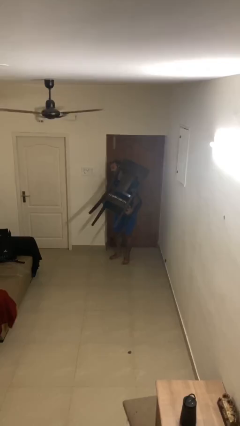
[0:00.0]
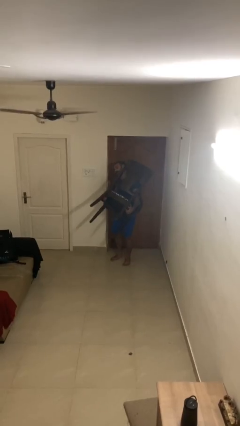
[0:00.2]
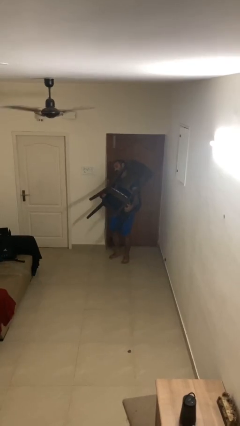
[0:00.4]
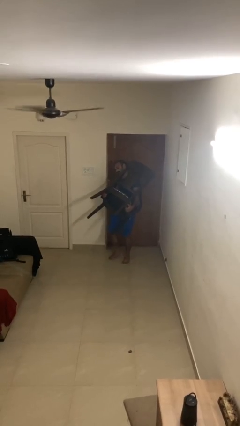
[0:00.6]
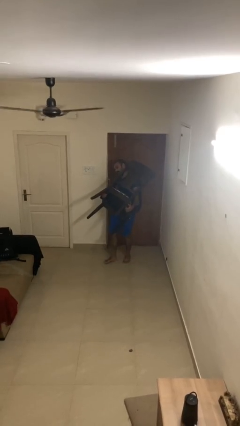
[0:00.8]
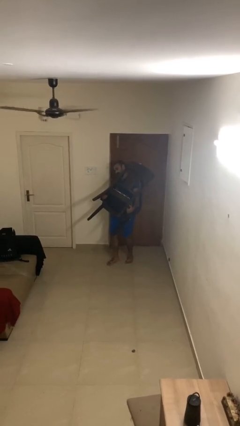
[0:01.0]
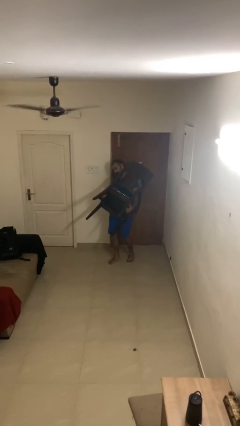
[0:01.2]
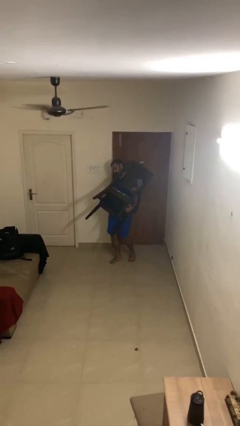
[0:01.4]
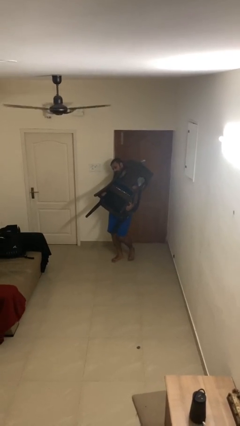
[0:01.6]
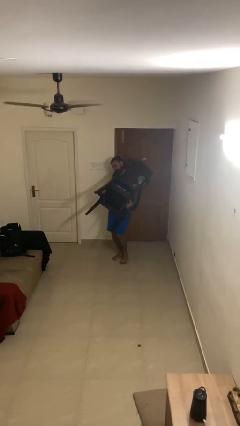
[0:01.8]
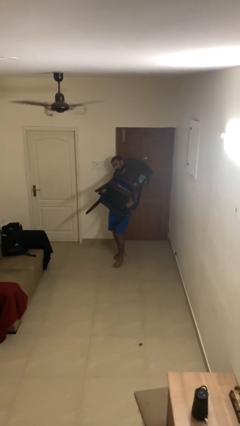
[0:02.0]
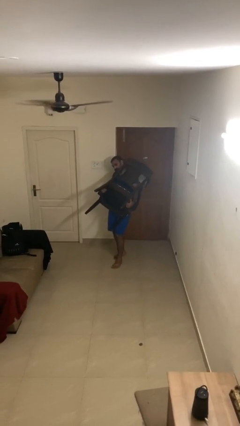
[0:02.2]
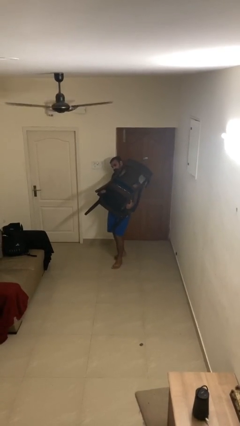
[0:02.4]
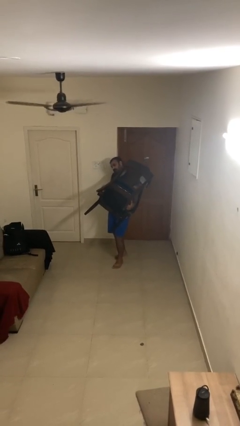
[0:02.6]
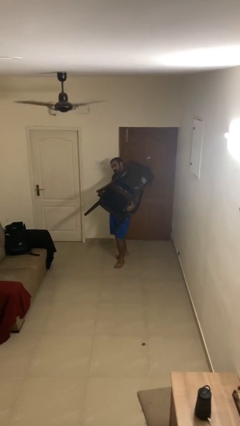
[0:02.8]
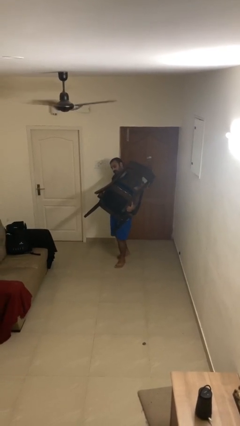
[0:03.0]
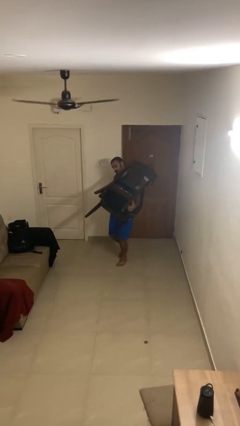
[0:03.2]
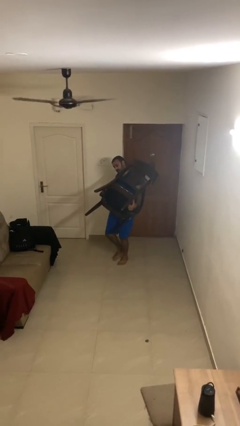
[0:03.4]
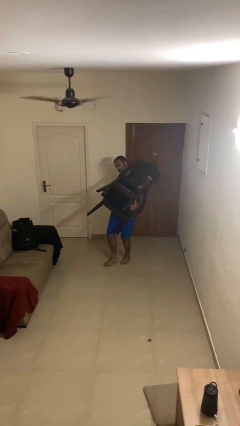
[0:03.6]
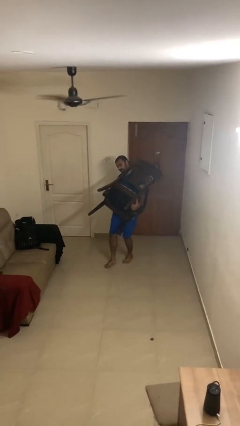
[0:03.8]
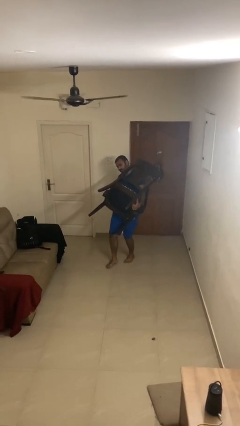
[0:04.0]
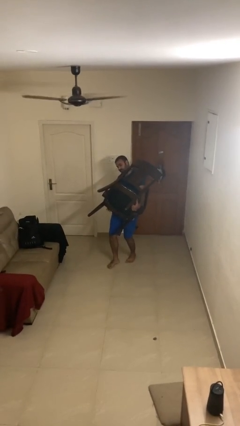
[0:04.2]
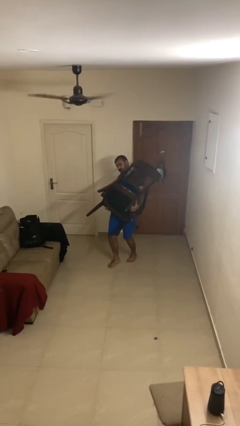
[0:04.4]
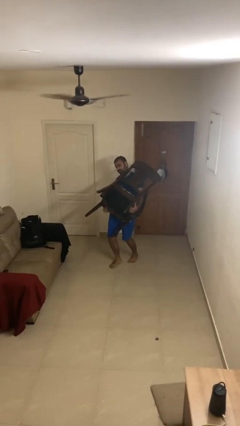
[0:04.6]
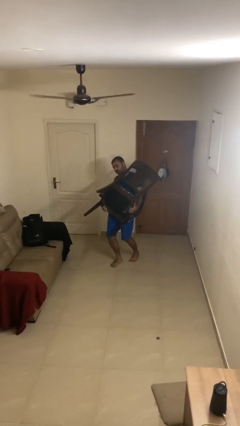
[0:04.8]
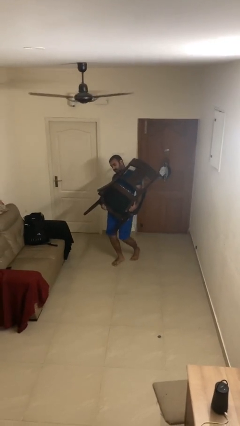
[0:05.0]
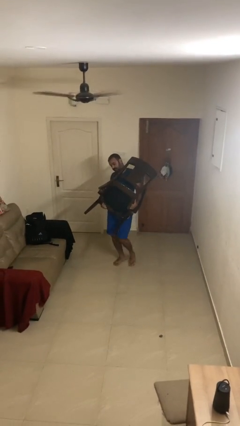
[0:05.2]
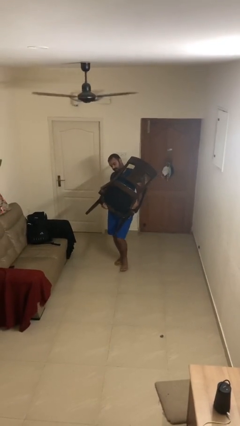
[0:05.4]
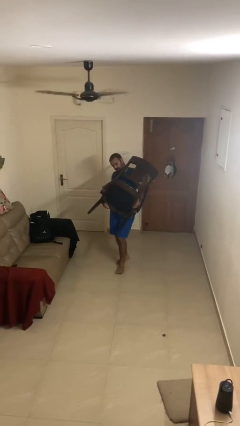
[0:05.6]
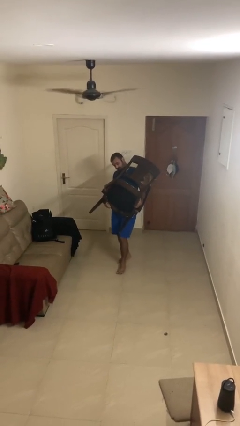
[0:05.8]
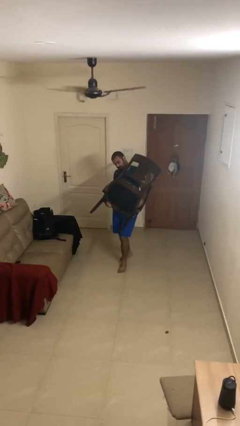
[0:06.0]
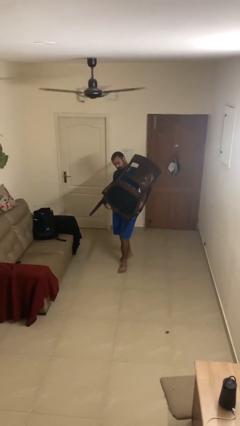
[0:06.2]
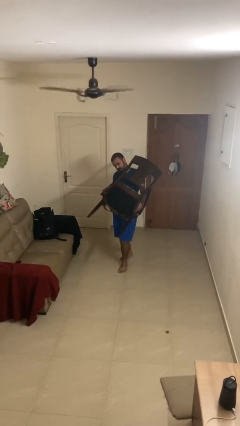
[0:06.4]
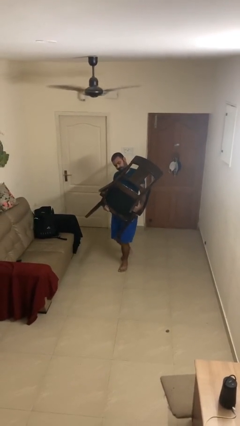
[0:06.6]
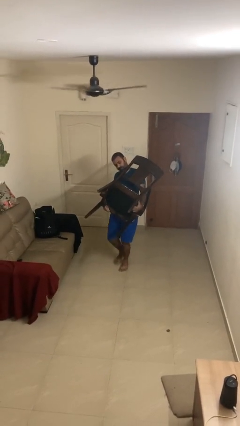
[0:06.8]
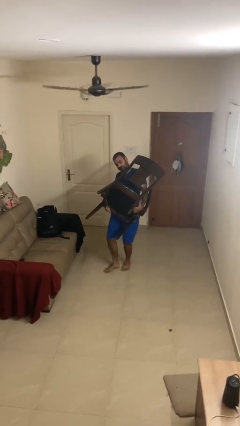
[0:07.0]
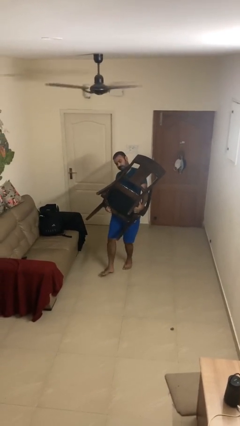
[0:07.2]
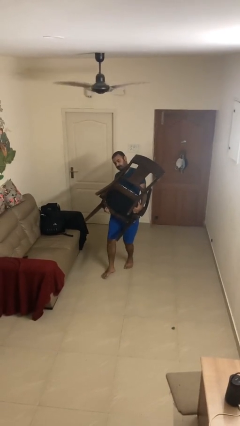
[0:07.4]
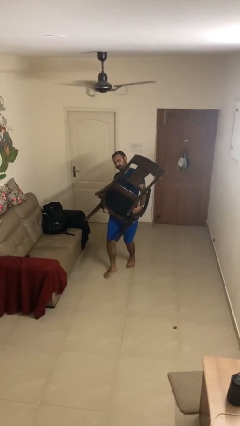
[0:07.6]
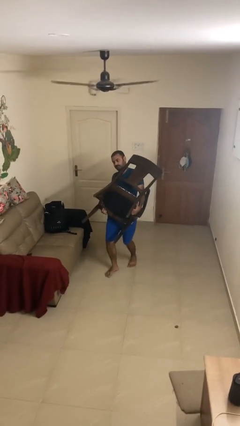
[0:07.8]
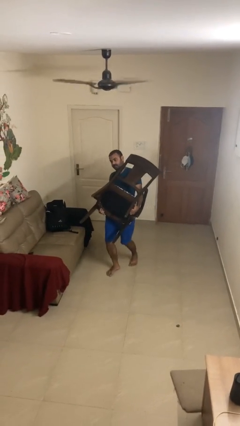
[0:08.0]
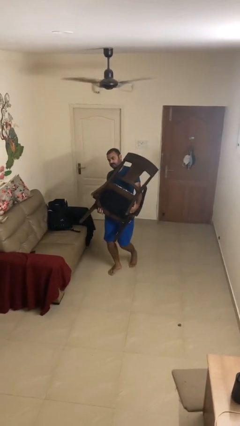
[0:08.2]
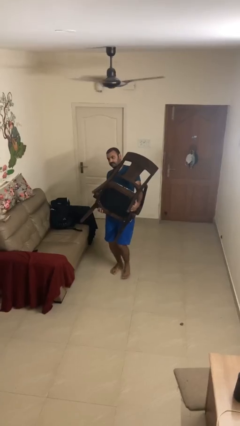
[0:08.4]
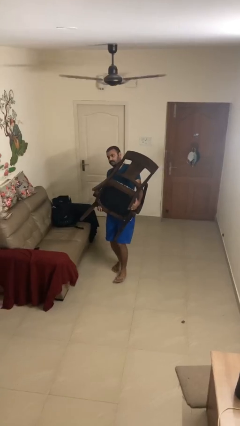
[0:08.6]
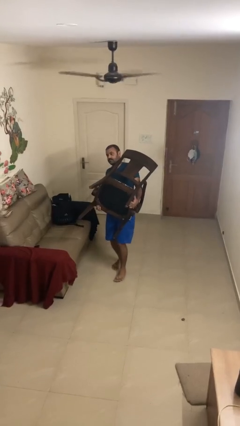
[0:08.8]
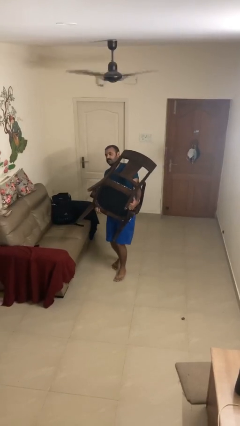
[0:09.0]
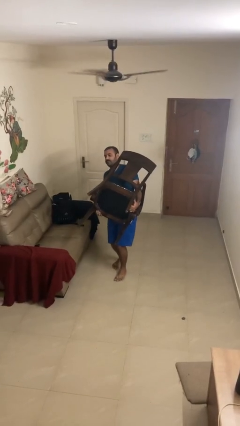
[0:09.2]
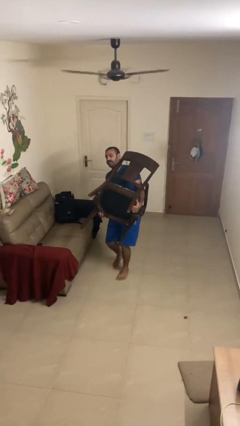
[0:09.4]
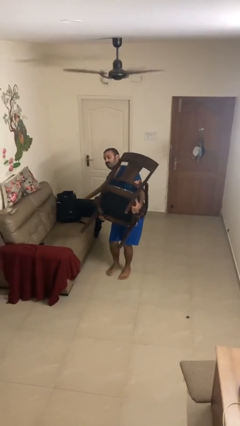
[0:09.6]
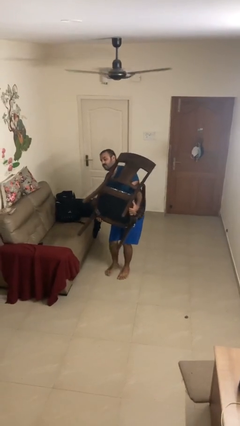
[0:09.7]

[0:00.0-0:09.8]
person carries heavy object

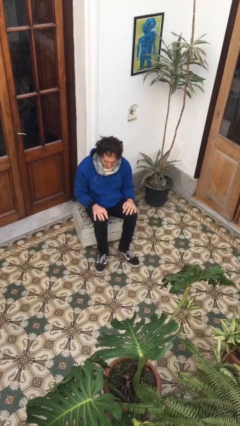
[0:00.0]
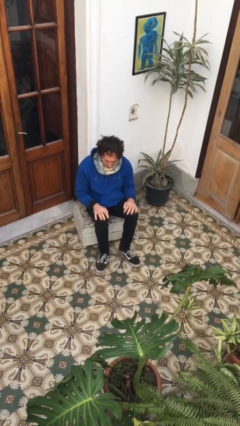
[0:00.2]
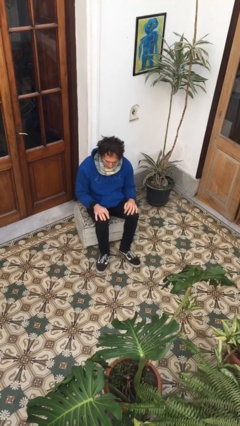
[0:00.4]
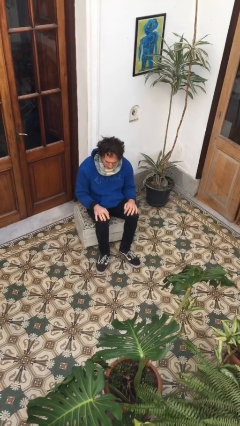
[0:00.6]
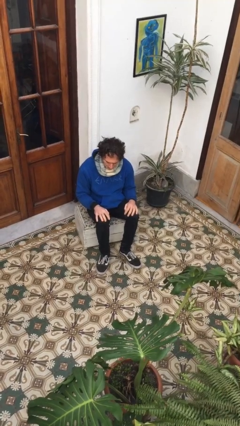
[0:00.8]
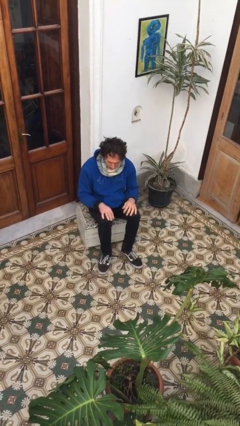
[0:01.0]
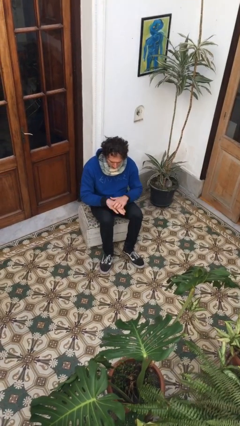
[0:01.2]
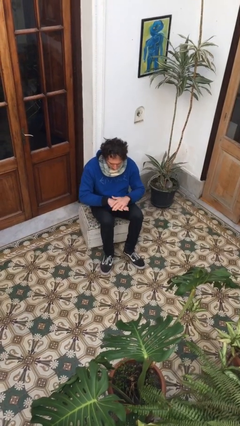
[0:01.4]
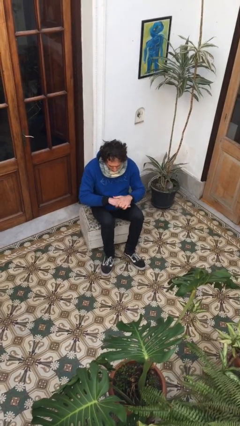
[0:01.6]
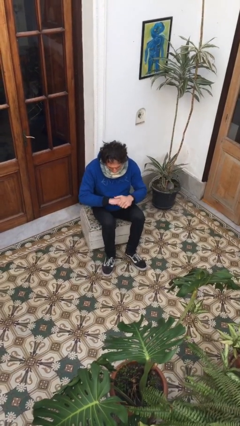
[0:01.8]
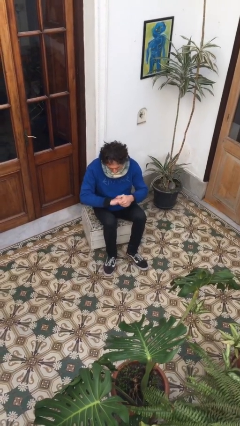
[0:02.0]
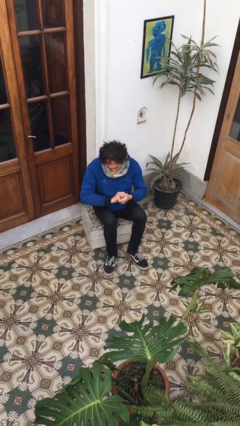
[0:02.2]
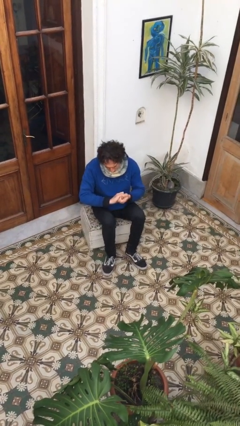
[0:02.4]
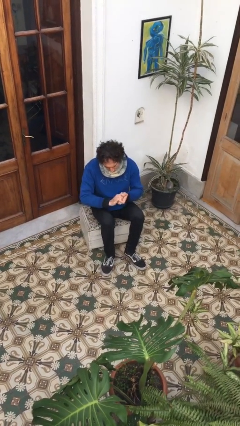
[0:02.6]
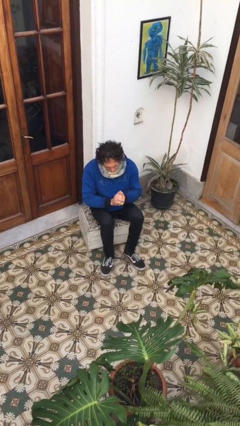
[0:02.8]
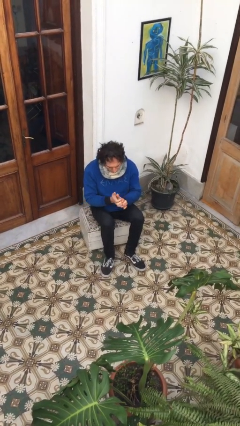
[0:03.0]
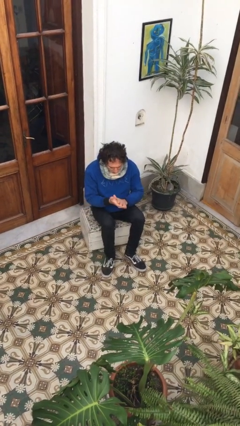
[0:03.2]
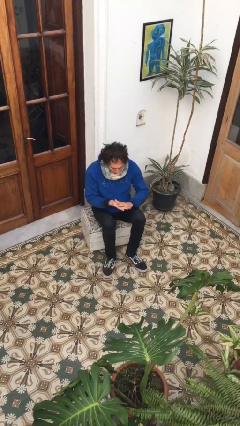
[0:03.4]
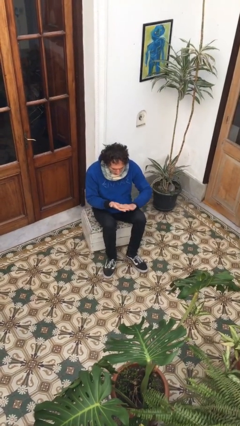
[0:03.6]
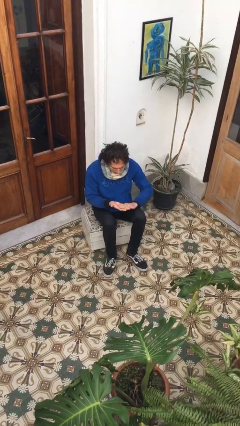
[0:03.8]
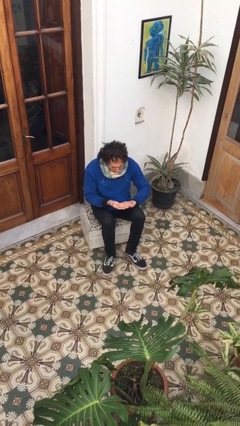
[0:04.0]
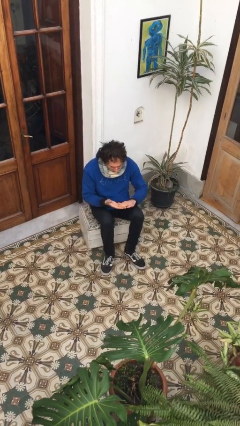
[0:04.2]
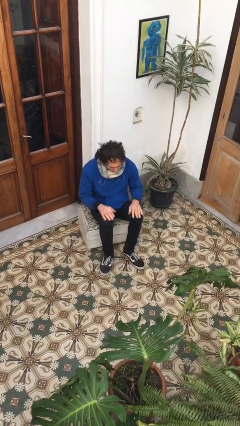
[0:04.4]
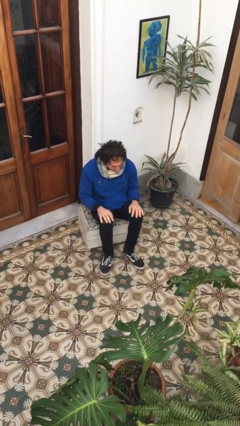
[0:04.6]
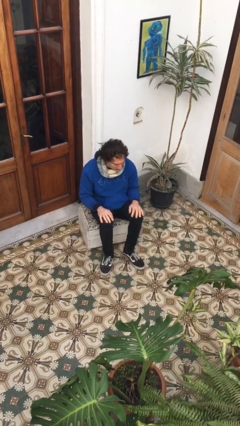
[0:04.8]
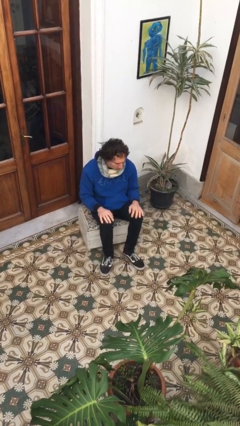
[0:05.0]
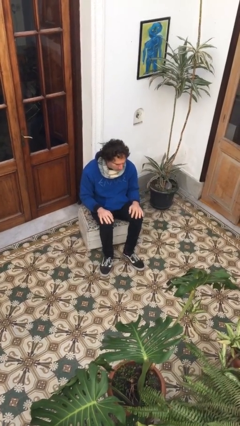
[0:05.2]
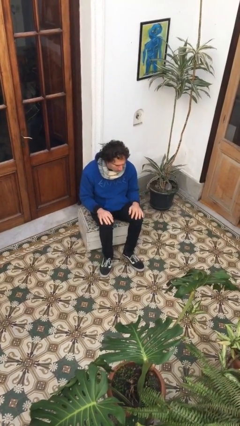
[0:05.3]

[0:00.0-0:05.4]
person looks at hands in lap

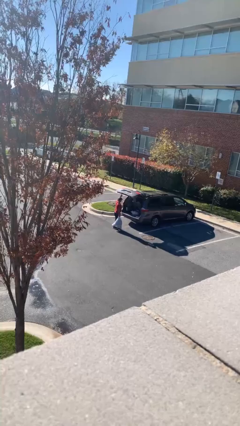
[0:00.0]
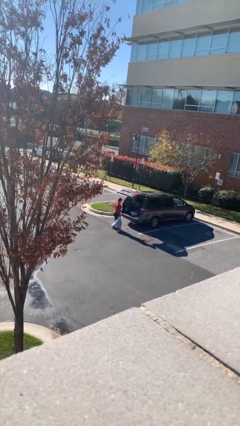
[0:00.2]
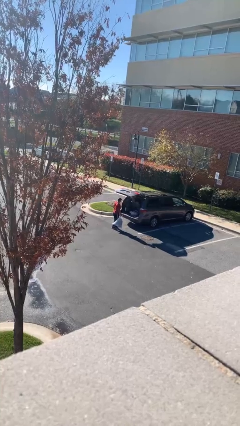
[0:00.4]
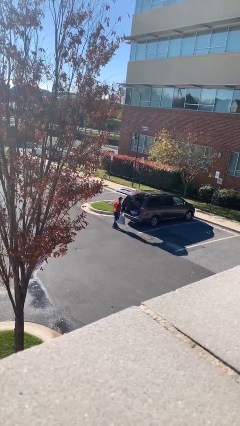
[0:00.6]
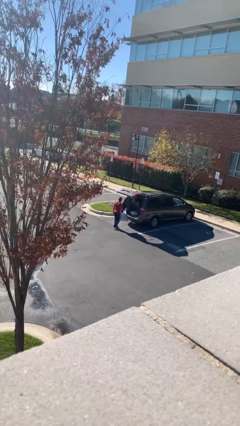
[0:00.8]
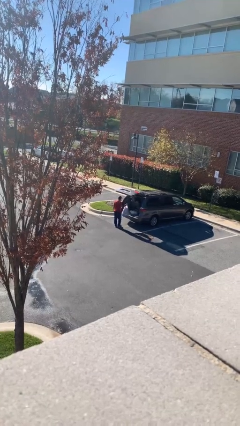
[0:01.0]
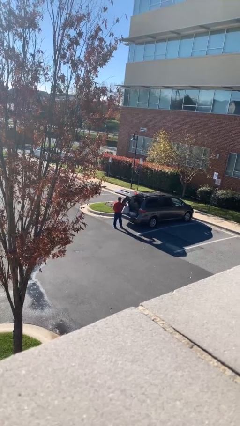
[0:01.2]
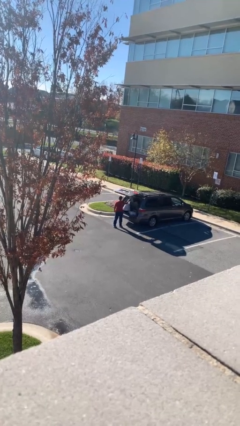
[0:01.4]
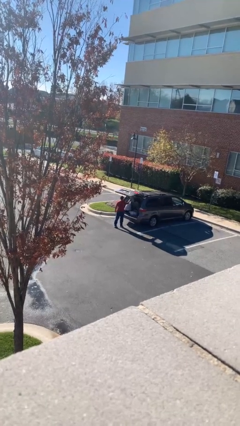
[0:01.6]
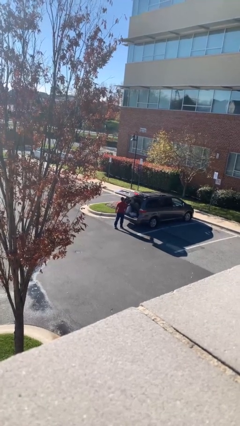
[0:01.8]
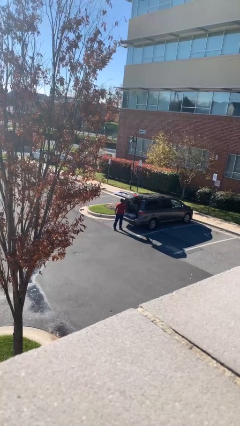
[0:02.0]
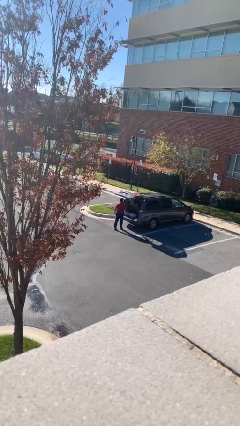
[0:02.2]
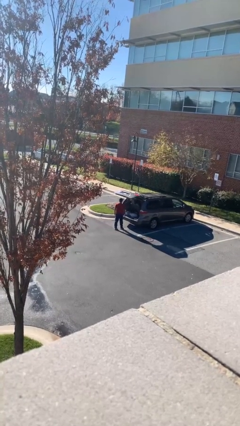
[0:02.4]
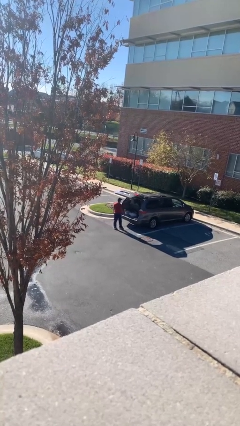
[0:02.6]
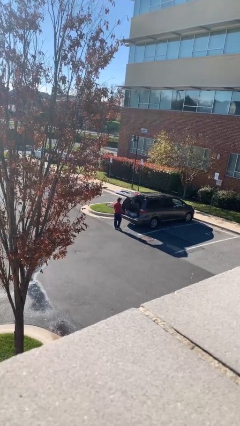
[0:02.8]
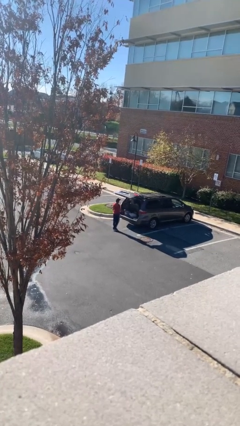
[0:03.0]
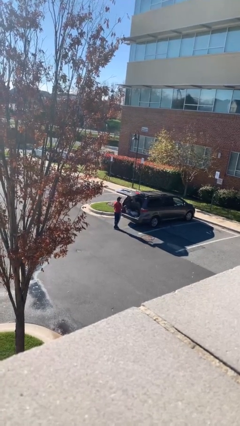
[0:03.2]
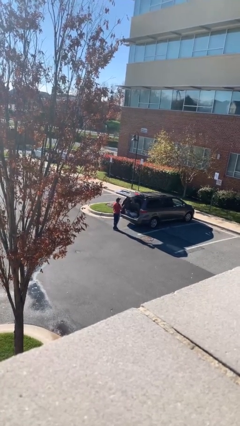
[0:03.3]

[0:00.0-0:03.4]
person loads car
